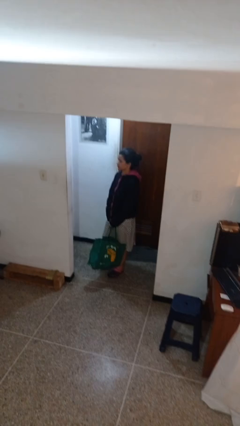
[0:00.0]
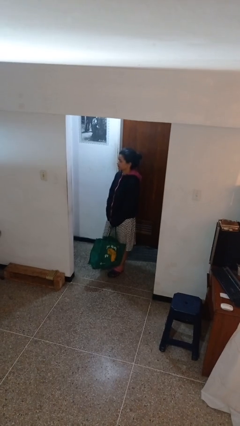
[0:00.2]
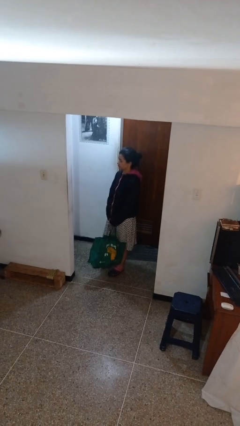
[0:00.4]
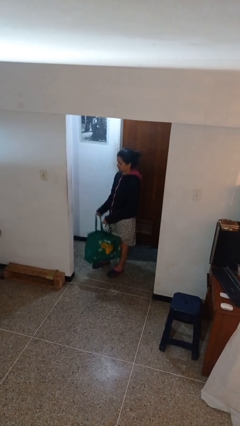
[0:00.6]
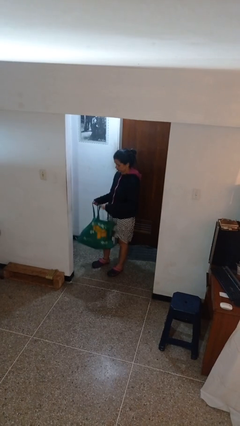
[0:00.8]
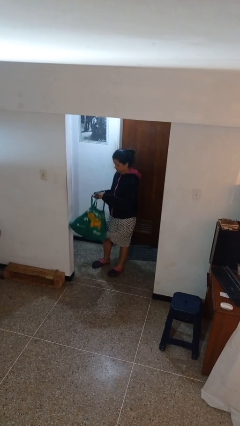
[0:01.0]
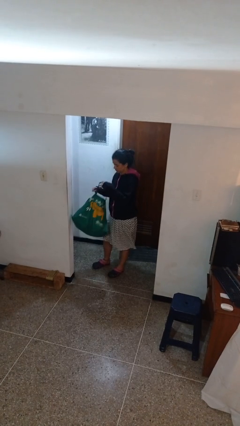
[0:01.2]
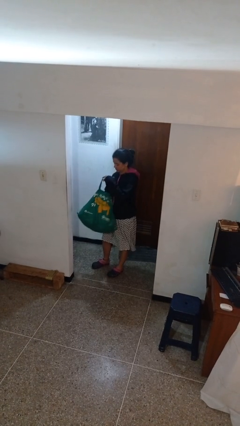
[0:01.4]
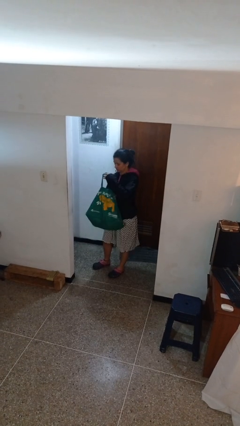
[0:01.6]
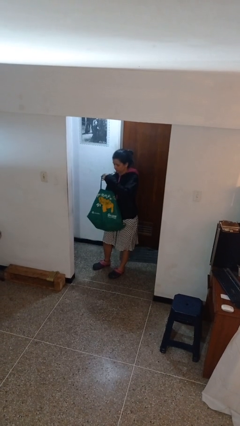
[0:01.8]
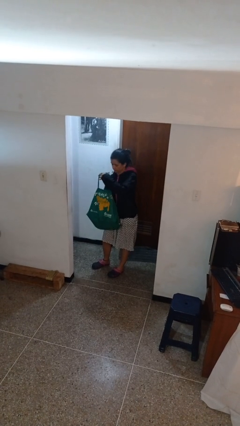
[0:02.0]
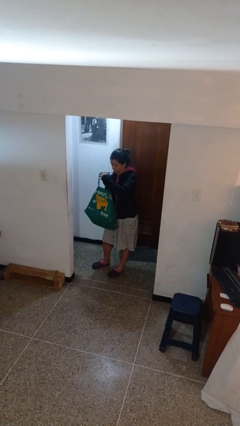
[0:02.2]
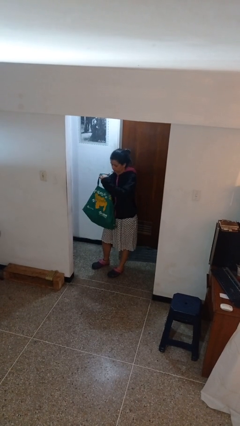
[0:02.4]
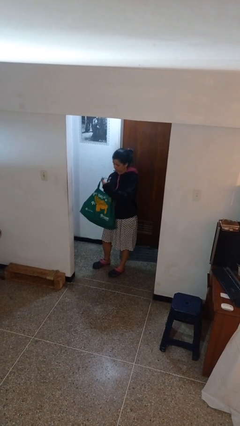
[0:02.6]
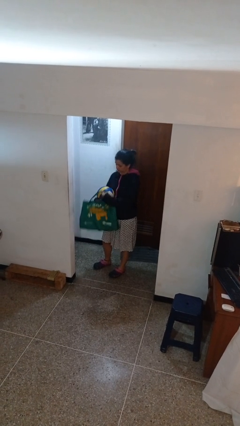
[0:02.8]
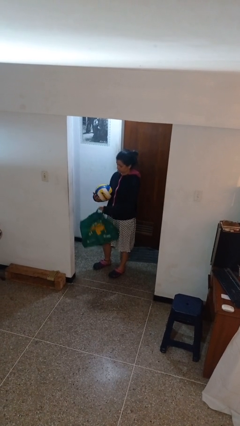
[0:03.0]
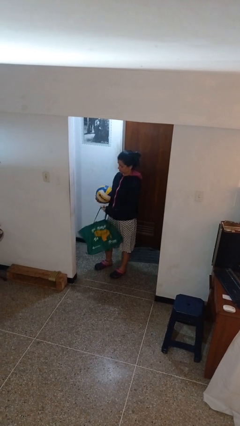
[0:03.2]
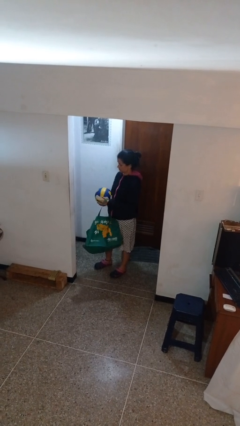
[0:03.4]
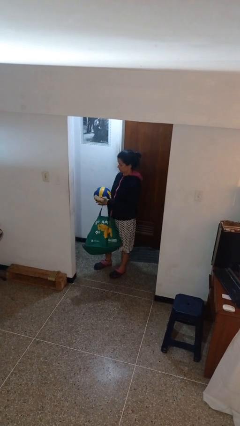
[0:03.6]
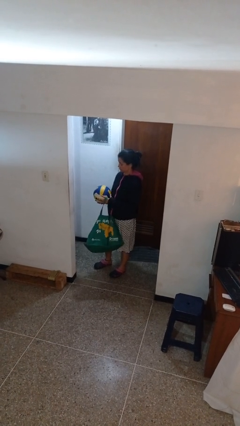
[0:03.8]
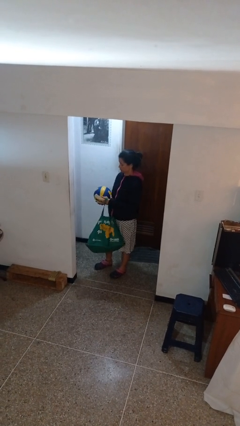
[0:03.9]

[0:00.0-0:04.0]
person takes object from bag

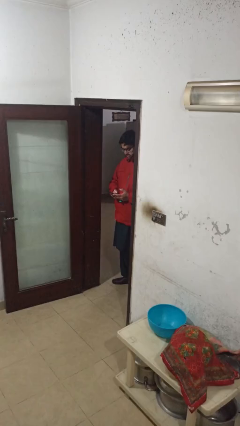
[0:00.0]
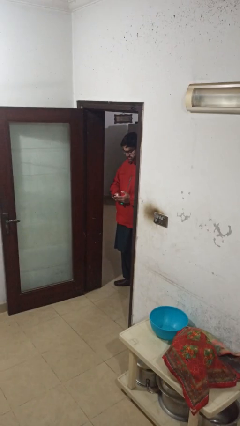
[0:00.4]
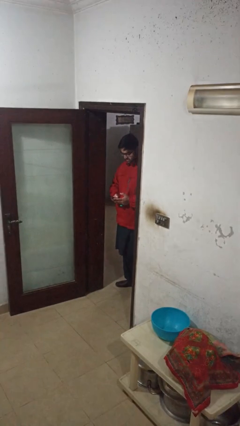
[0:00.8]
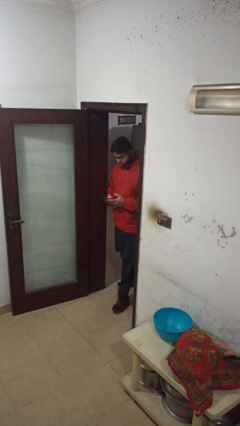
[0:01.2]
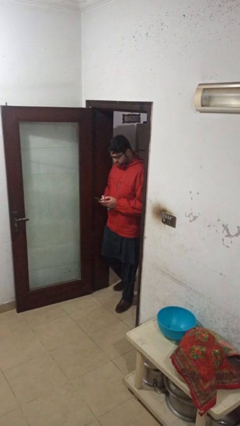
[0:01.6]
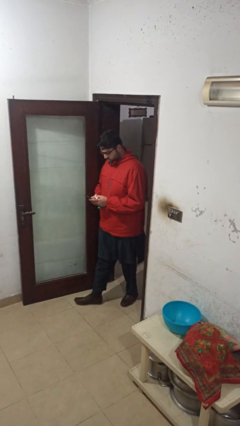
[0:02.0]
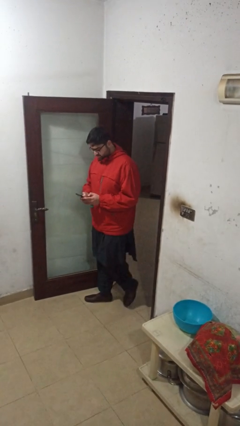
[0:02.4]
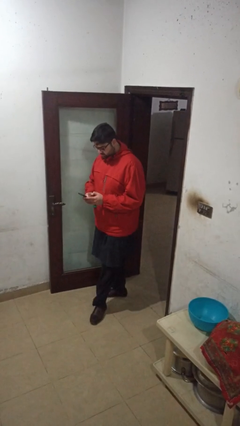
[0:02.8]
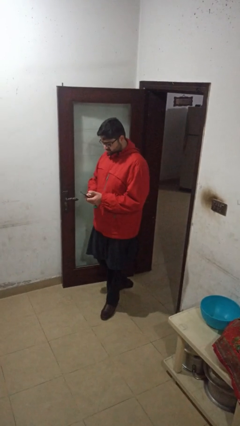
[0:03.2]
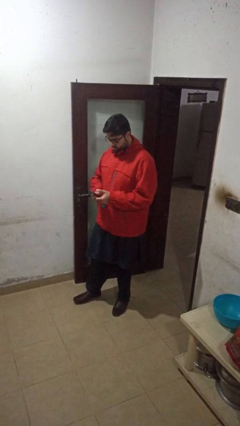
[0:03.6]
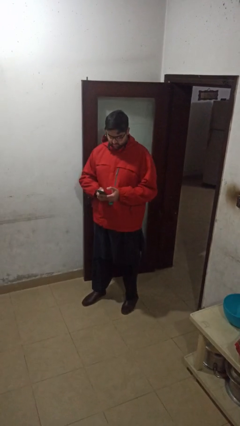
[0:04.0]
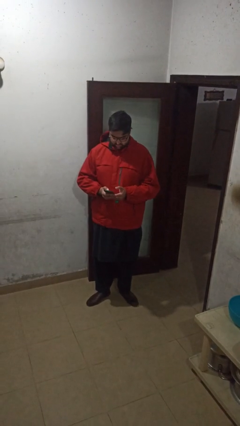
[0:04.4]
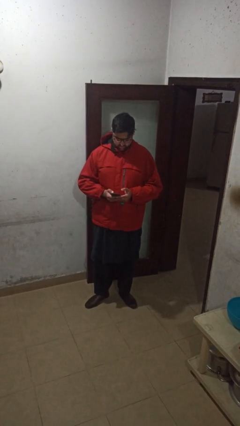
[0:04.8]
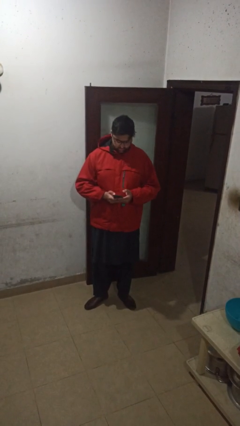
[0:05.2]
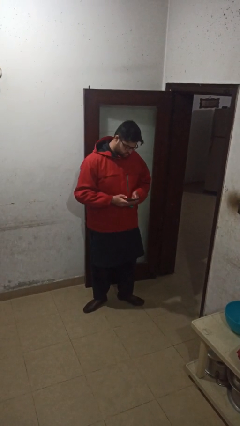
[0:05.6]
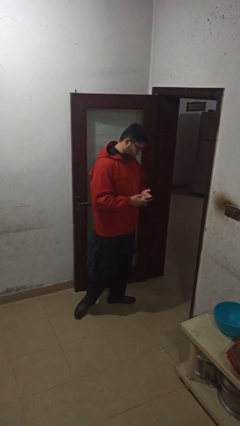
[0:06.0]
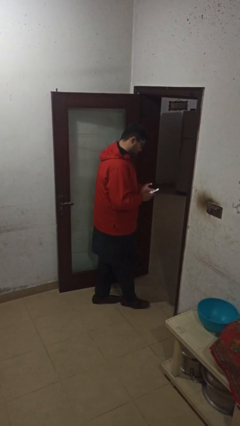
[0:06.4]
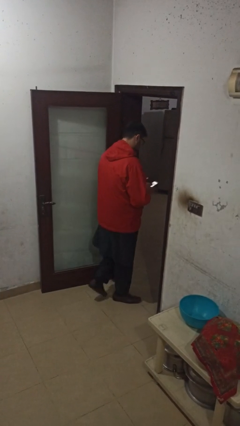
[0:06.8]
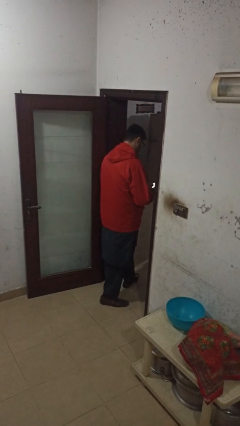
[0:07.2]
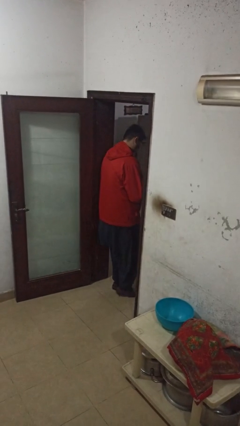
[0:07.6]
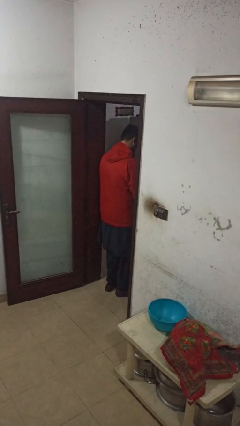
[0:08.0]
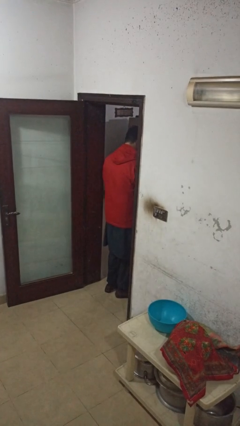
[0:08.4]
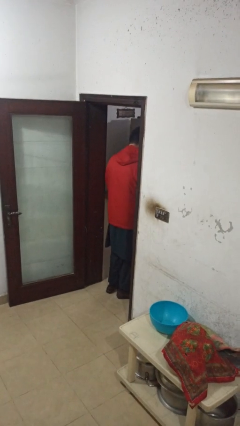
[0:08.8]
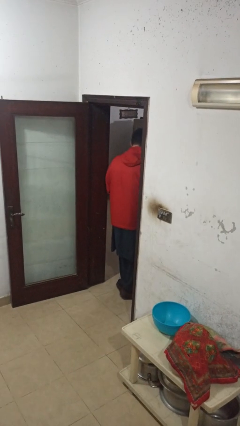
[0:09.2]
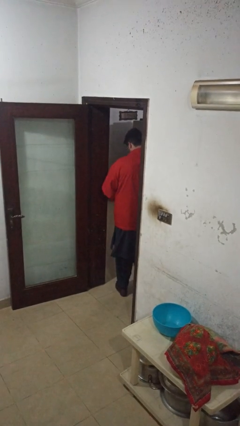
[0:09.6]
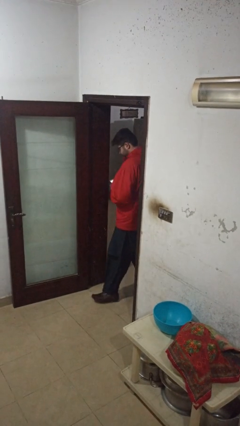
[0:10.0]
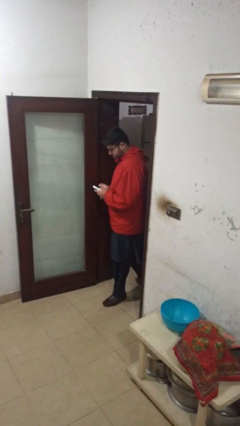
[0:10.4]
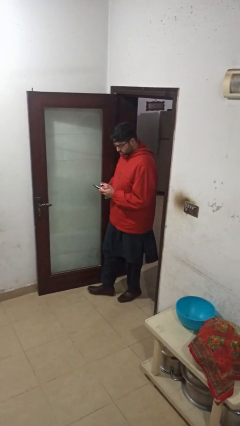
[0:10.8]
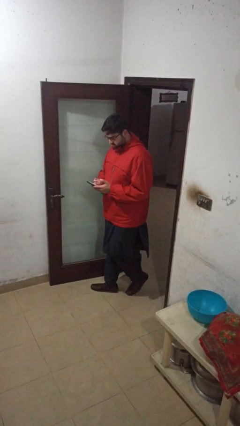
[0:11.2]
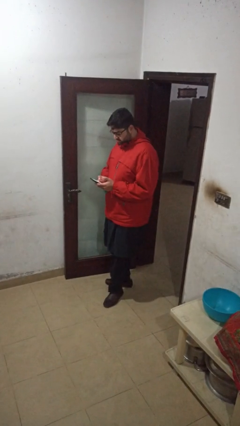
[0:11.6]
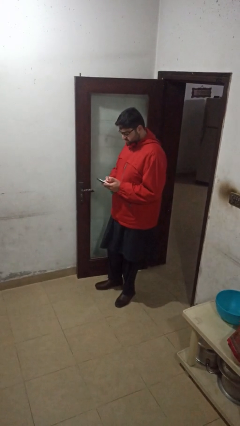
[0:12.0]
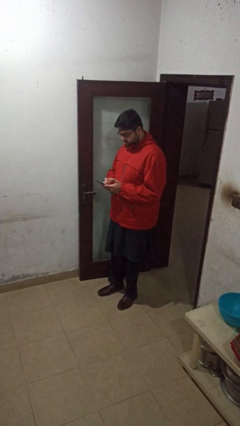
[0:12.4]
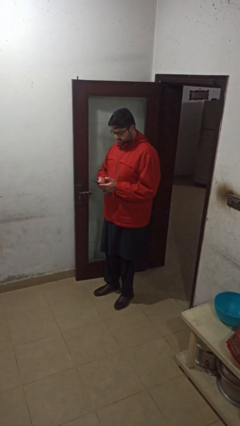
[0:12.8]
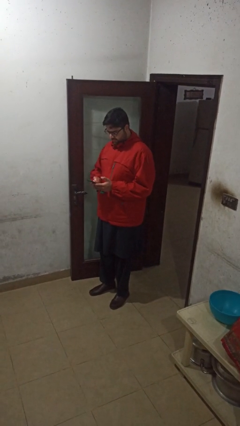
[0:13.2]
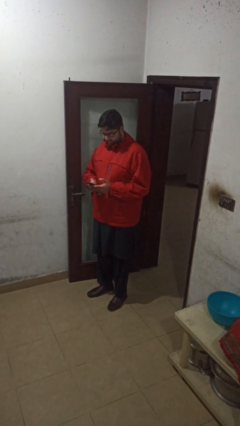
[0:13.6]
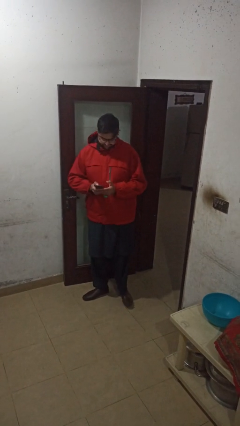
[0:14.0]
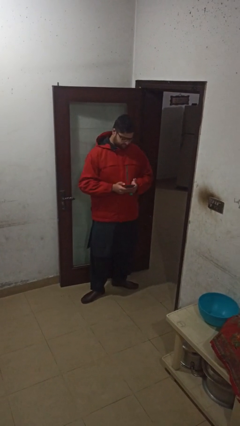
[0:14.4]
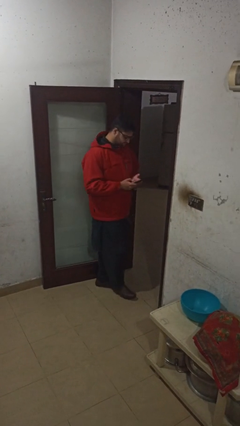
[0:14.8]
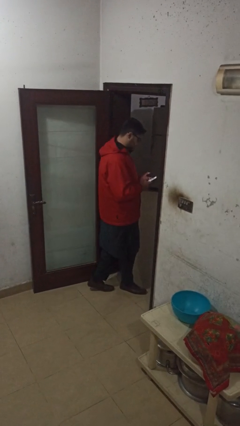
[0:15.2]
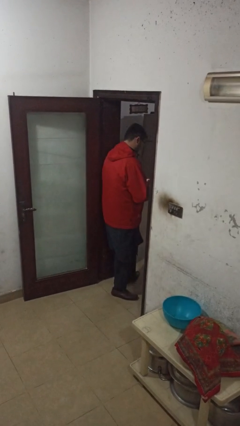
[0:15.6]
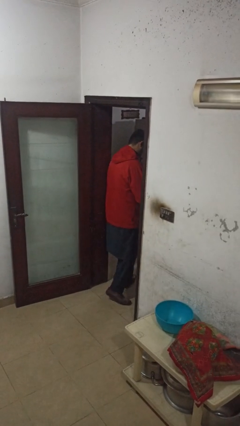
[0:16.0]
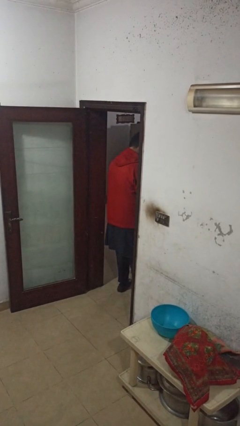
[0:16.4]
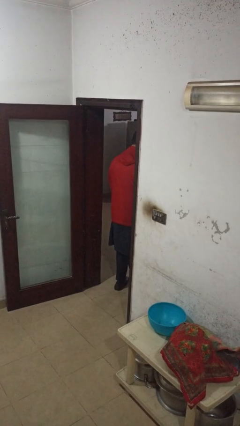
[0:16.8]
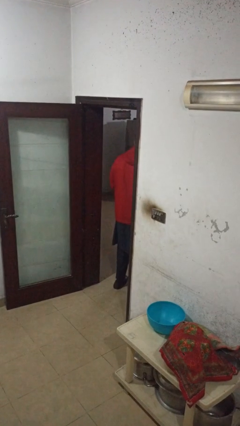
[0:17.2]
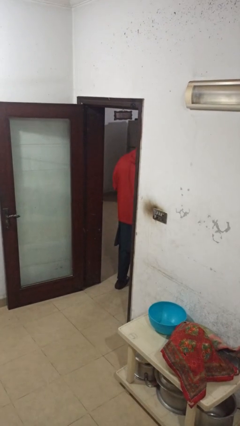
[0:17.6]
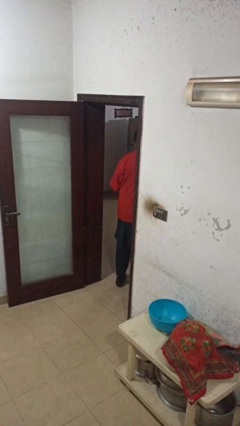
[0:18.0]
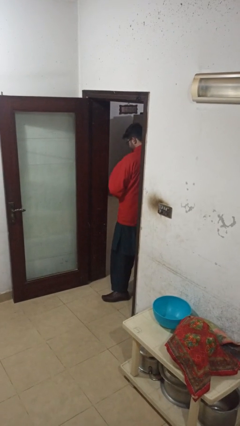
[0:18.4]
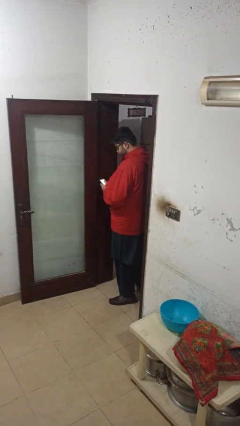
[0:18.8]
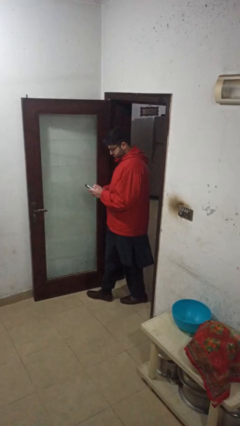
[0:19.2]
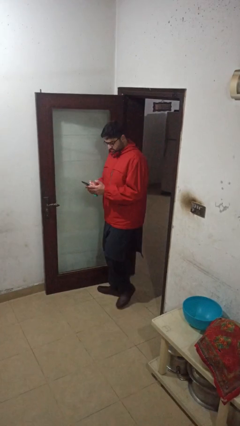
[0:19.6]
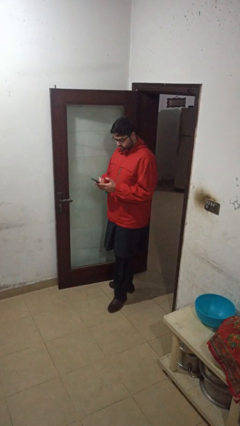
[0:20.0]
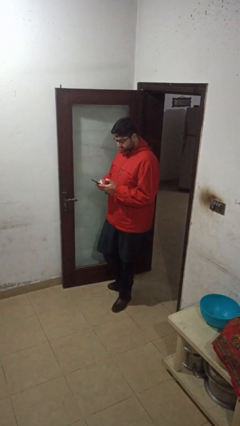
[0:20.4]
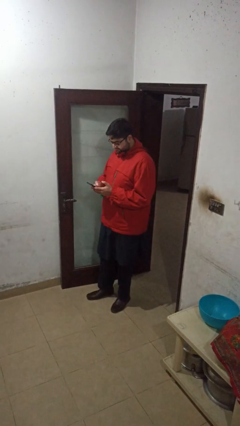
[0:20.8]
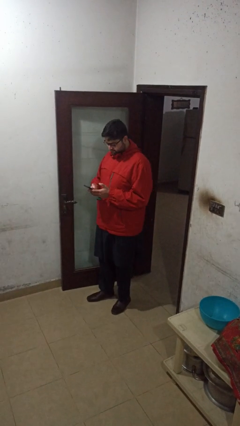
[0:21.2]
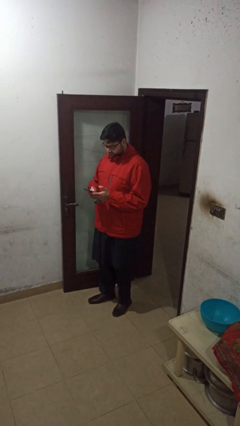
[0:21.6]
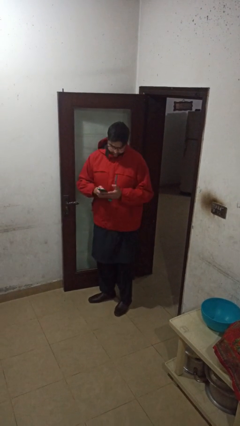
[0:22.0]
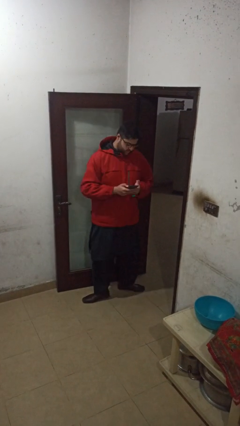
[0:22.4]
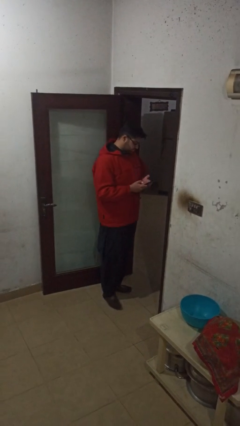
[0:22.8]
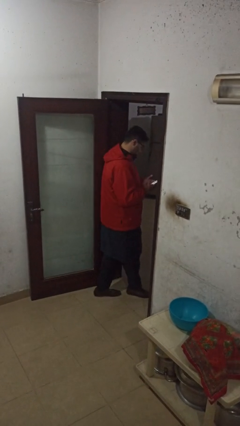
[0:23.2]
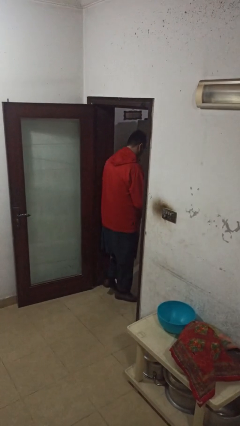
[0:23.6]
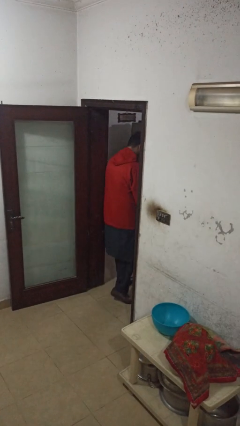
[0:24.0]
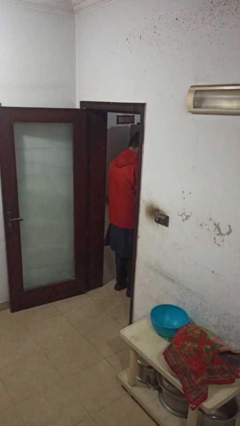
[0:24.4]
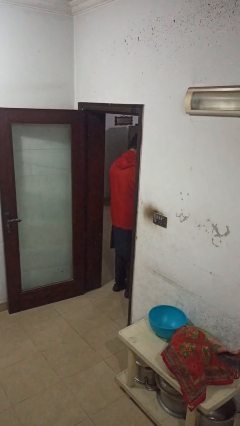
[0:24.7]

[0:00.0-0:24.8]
person texts on phone

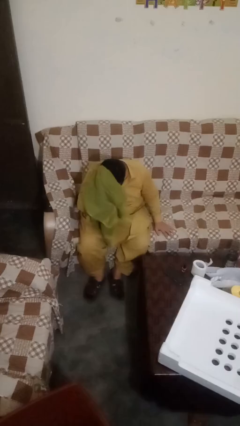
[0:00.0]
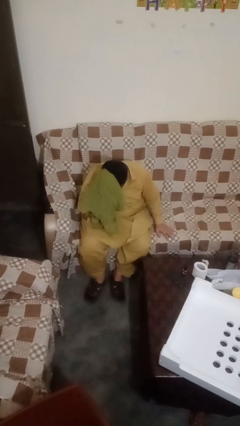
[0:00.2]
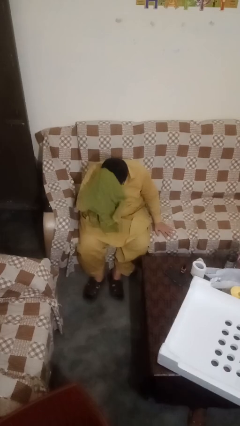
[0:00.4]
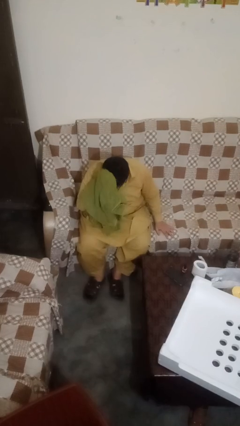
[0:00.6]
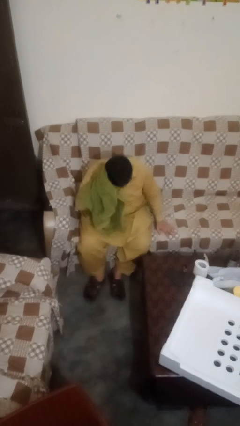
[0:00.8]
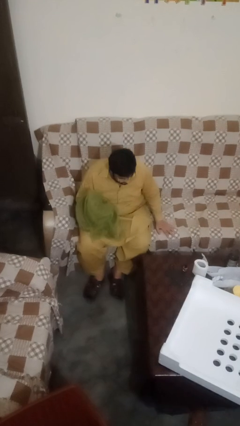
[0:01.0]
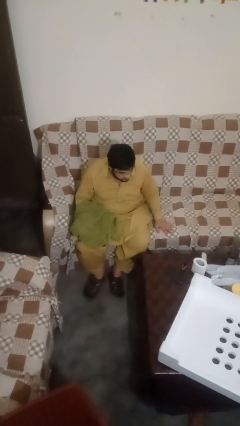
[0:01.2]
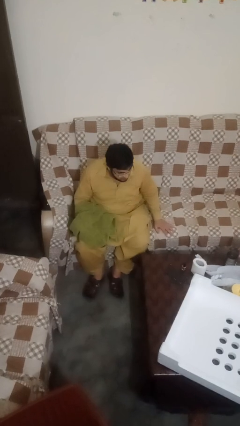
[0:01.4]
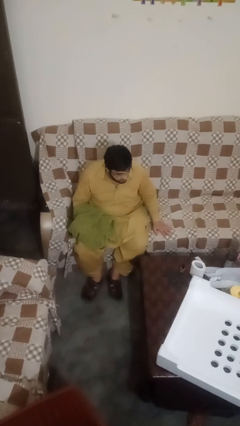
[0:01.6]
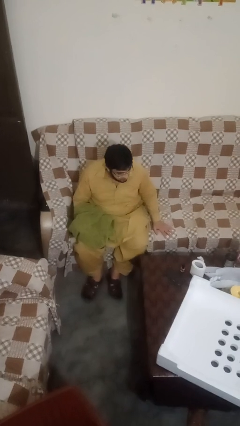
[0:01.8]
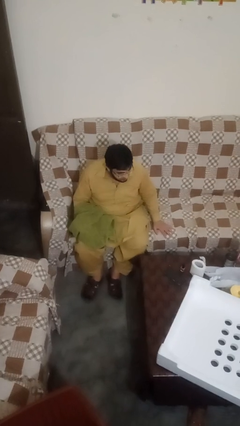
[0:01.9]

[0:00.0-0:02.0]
person dries hair with towel
